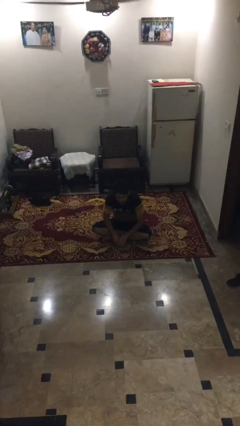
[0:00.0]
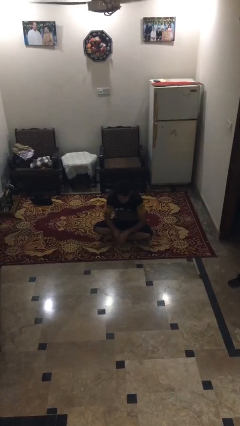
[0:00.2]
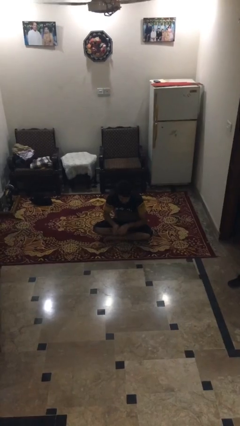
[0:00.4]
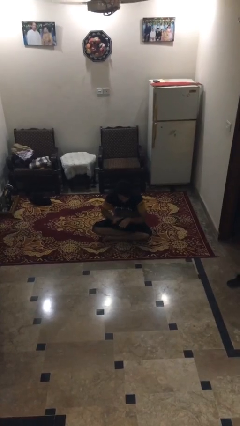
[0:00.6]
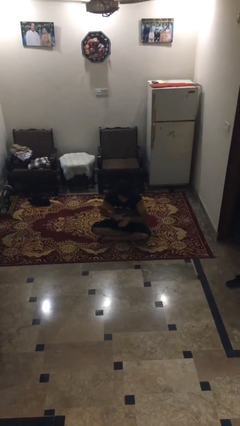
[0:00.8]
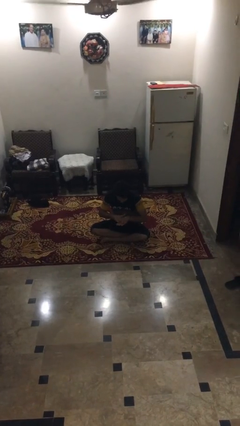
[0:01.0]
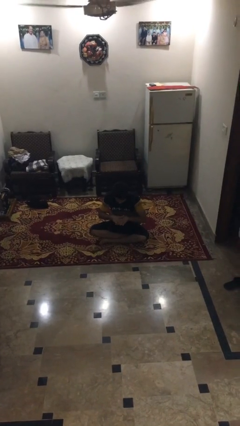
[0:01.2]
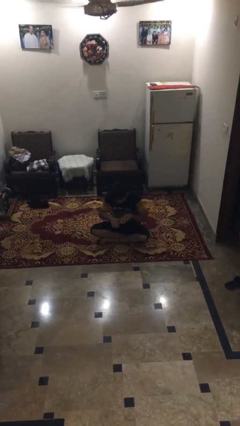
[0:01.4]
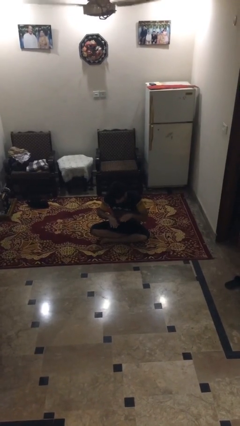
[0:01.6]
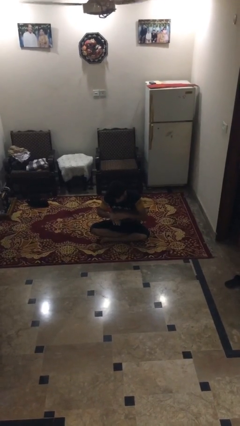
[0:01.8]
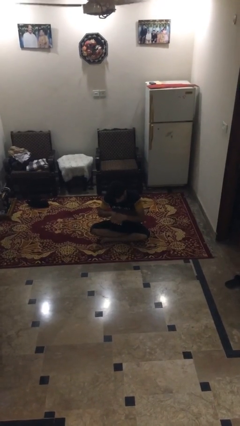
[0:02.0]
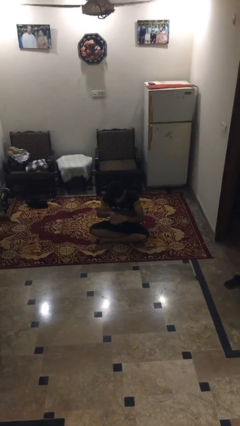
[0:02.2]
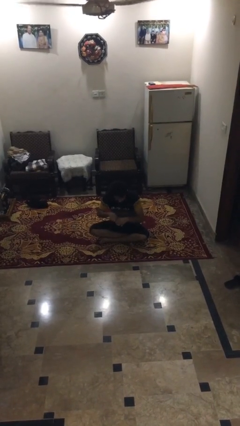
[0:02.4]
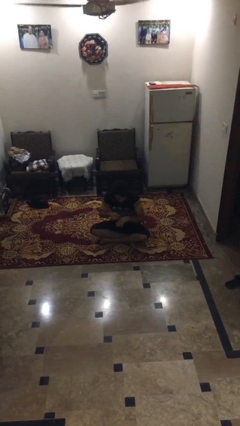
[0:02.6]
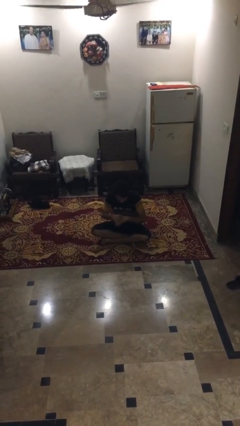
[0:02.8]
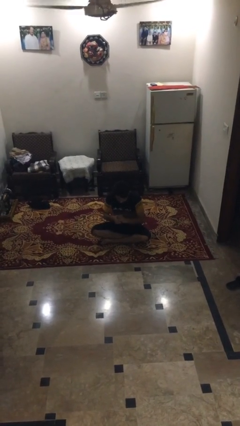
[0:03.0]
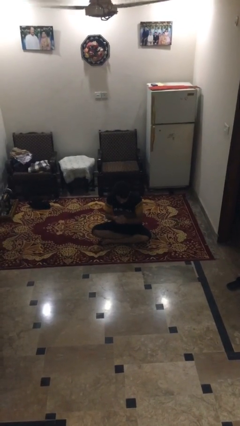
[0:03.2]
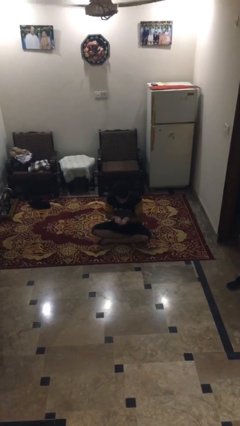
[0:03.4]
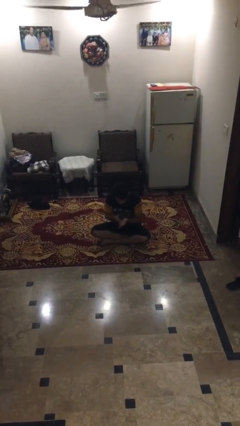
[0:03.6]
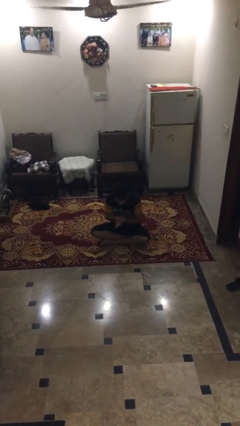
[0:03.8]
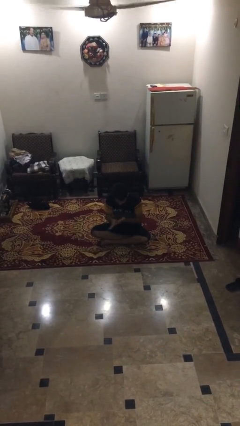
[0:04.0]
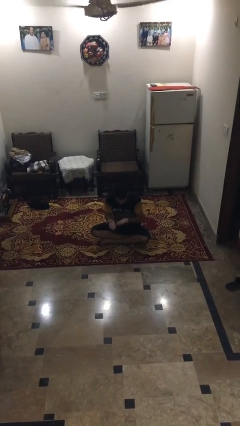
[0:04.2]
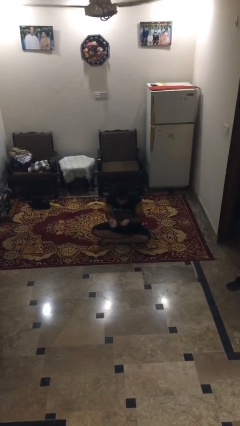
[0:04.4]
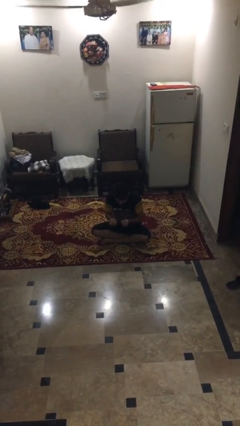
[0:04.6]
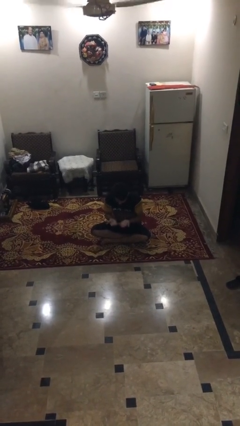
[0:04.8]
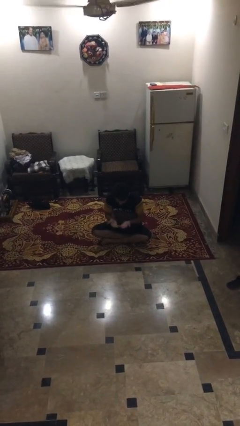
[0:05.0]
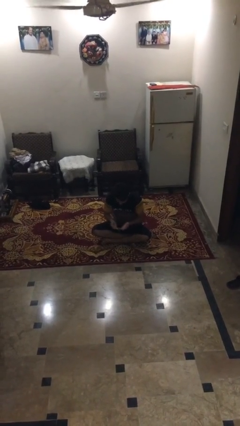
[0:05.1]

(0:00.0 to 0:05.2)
person looks at hands in lap

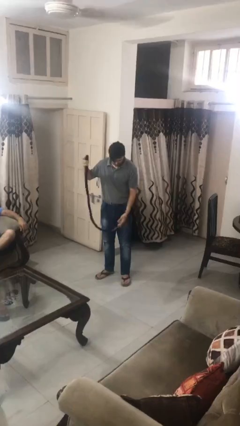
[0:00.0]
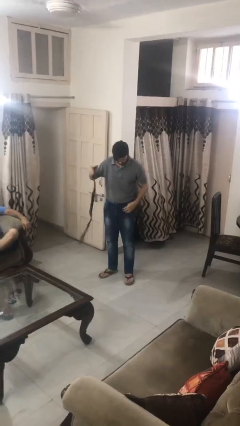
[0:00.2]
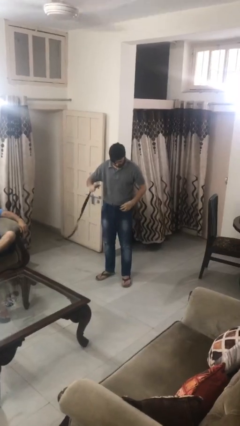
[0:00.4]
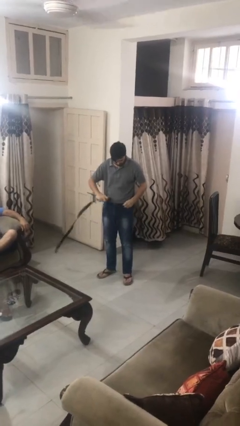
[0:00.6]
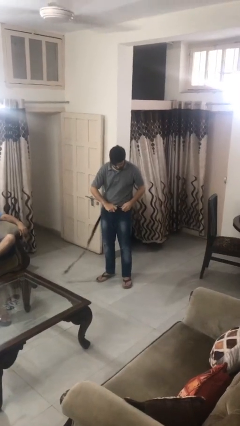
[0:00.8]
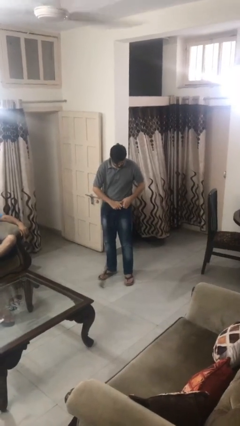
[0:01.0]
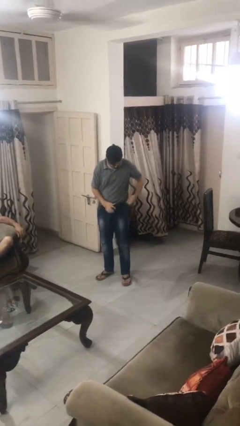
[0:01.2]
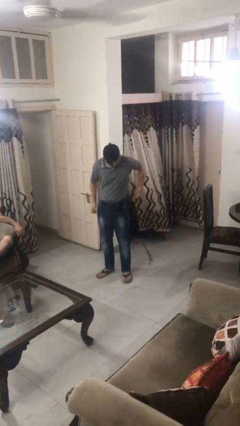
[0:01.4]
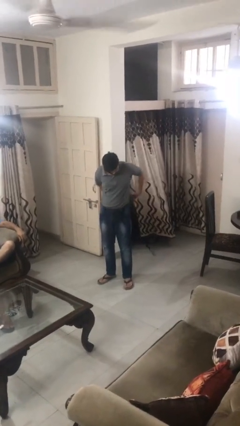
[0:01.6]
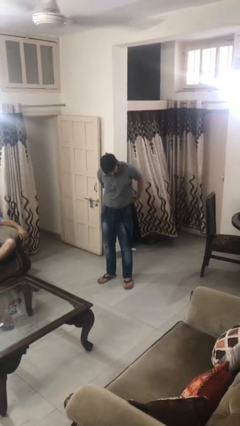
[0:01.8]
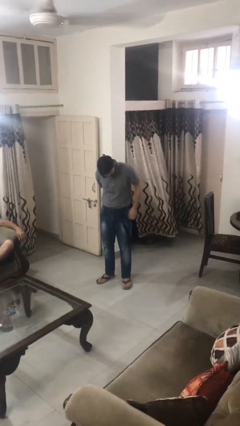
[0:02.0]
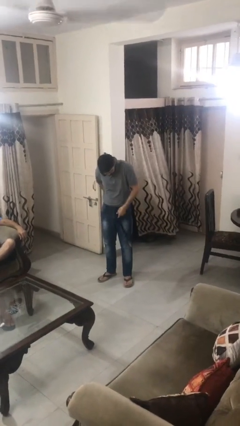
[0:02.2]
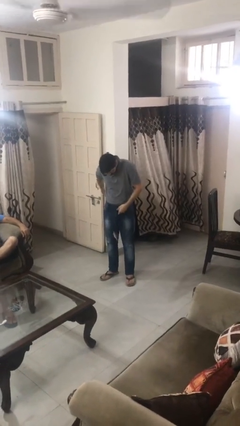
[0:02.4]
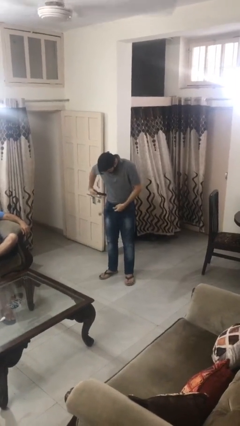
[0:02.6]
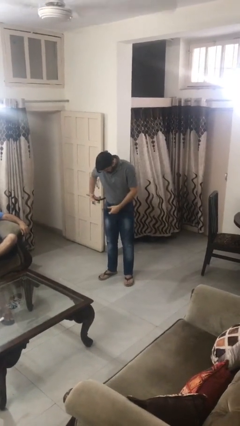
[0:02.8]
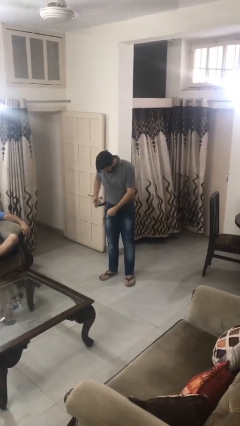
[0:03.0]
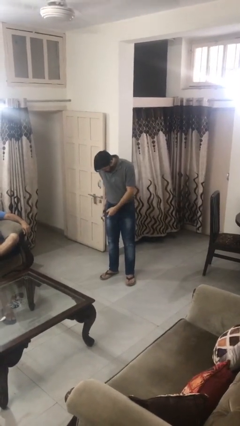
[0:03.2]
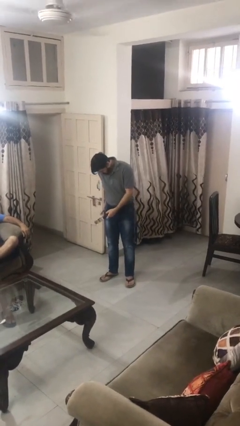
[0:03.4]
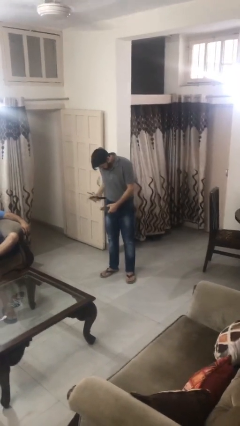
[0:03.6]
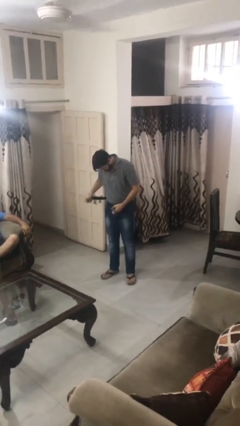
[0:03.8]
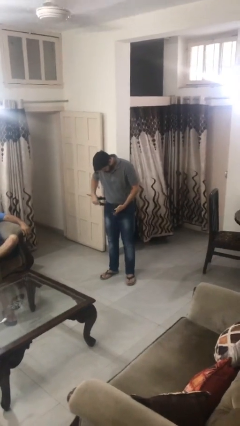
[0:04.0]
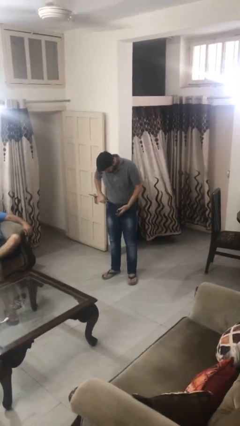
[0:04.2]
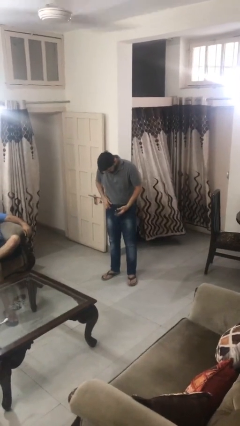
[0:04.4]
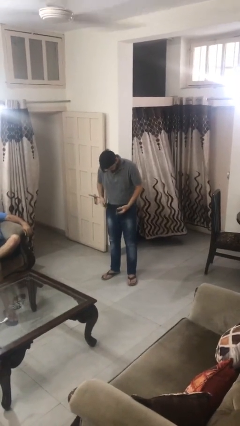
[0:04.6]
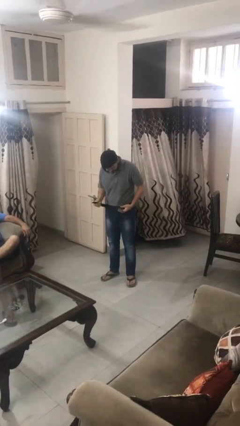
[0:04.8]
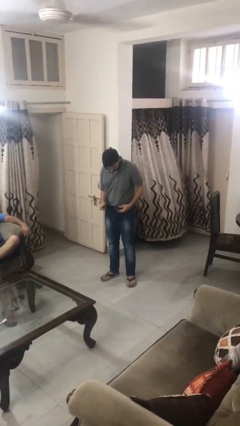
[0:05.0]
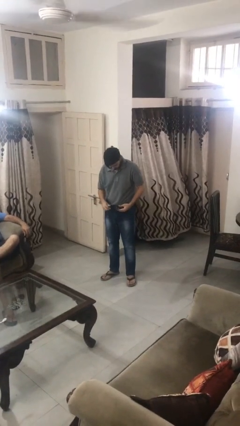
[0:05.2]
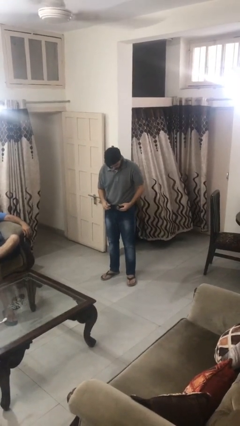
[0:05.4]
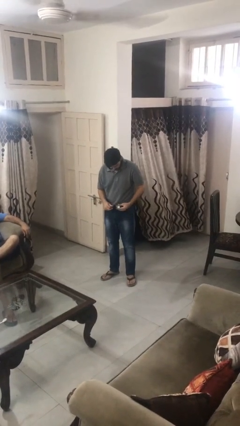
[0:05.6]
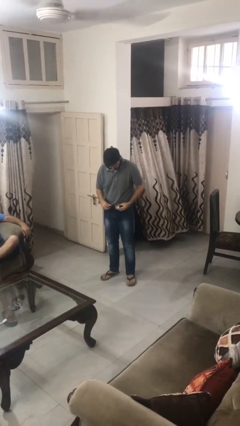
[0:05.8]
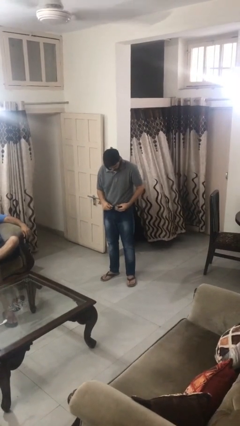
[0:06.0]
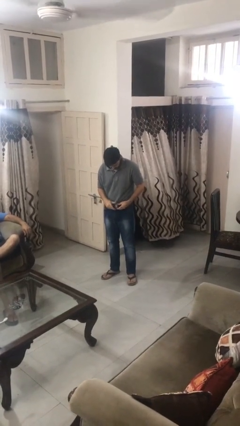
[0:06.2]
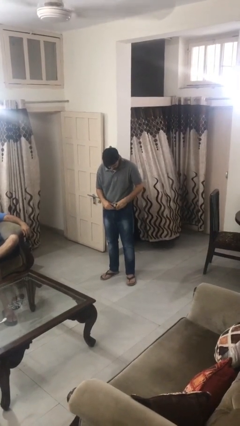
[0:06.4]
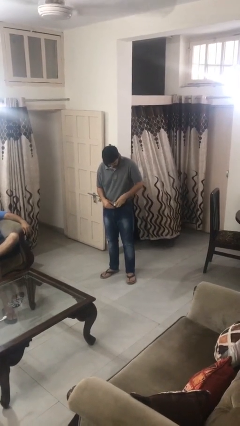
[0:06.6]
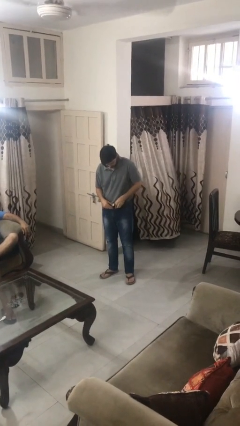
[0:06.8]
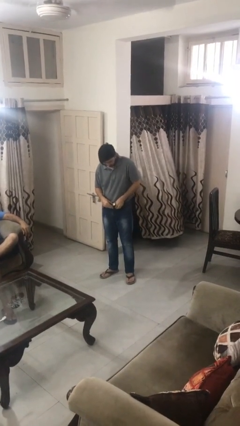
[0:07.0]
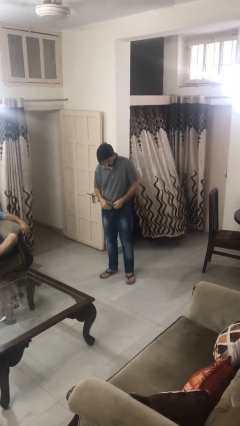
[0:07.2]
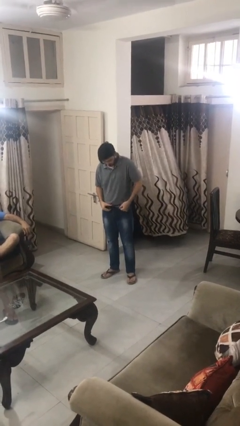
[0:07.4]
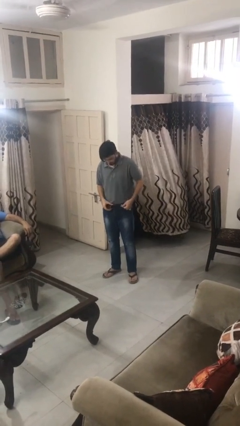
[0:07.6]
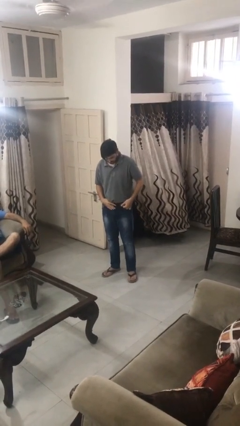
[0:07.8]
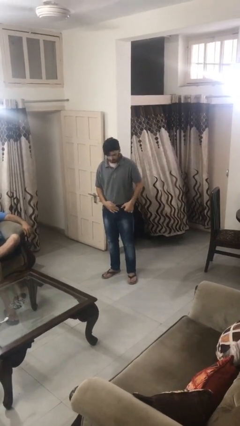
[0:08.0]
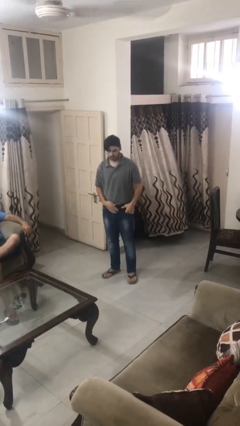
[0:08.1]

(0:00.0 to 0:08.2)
person puts on belt

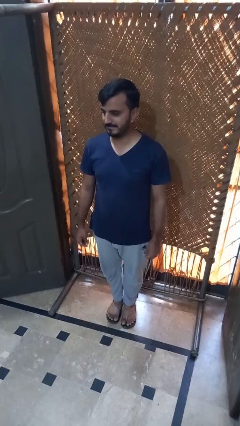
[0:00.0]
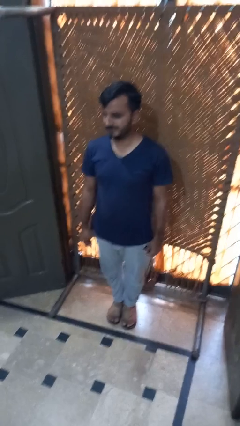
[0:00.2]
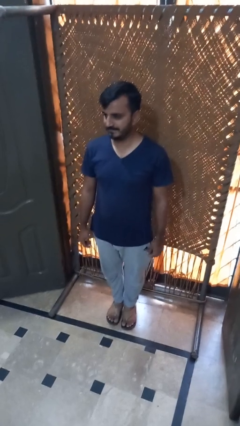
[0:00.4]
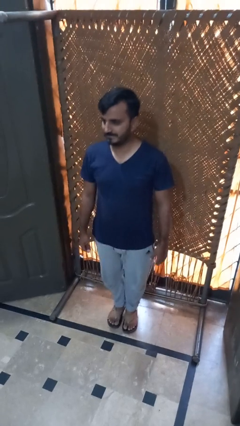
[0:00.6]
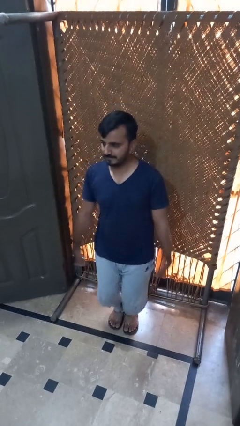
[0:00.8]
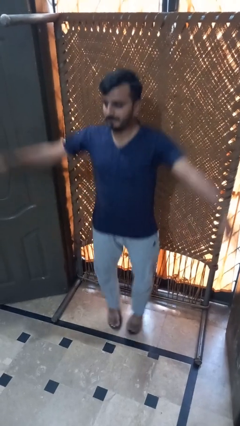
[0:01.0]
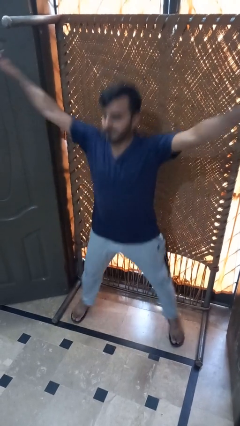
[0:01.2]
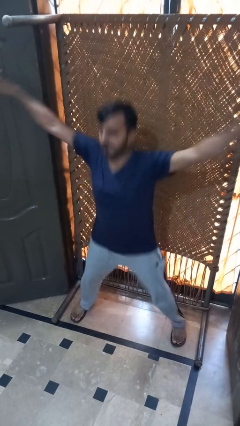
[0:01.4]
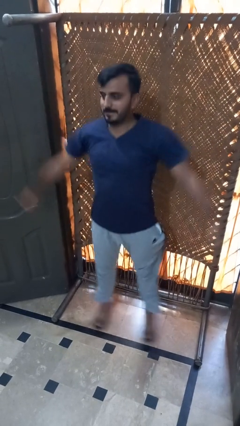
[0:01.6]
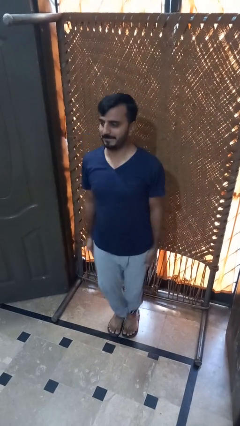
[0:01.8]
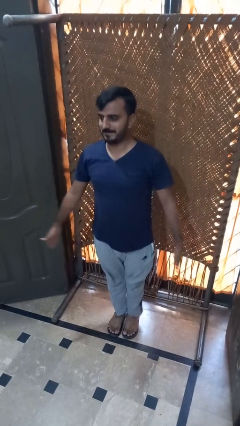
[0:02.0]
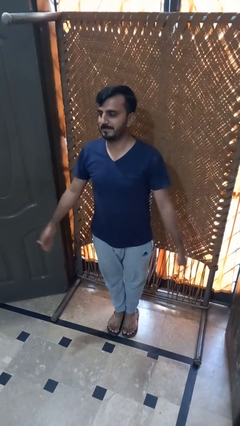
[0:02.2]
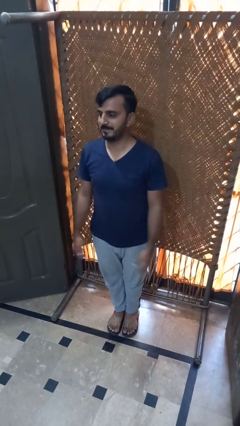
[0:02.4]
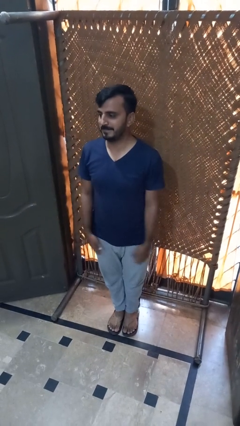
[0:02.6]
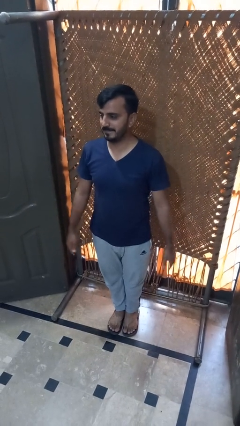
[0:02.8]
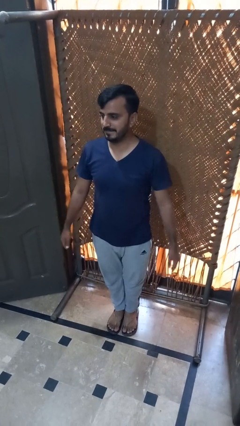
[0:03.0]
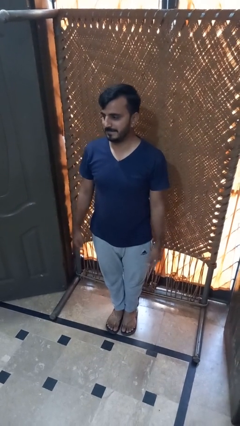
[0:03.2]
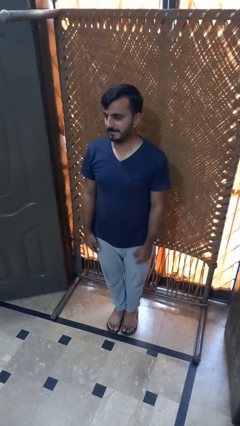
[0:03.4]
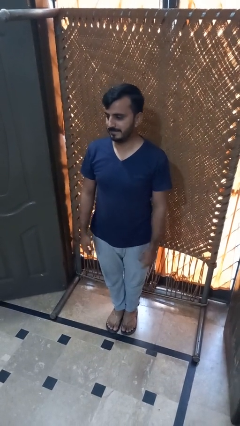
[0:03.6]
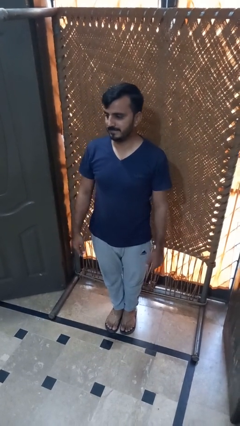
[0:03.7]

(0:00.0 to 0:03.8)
person exercises with jumping jacks

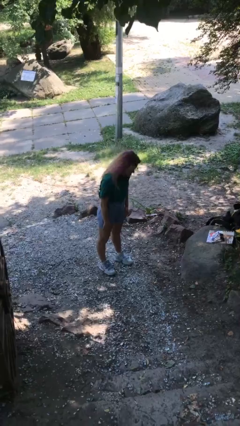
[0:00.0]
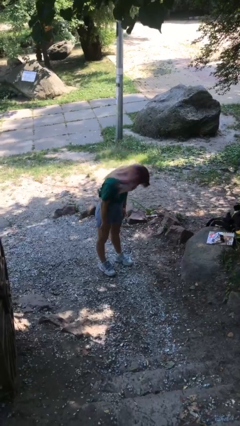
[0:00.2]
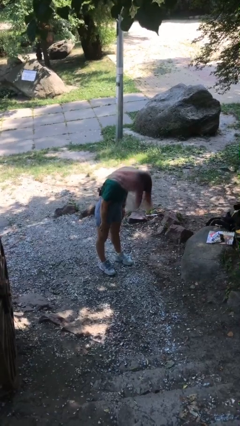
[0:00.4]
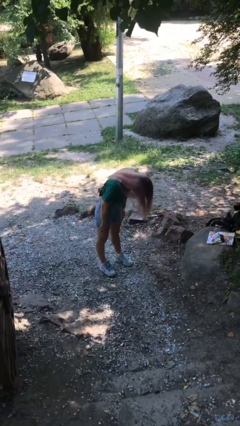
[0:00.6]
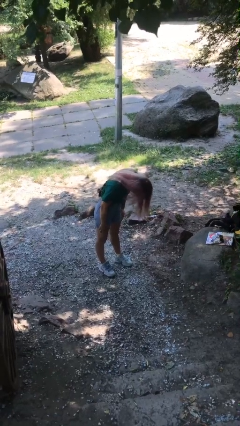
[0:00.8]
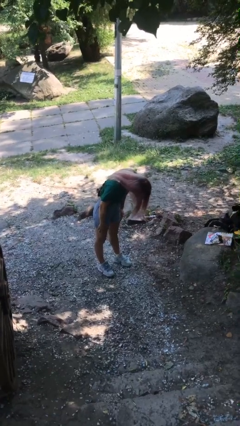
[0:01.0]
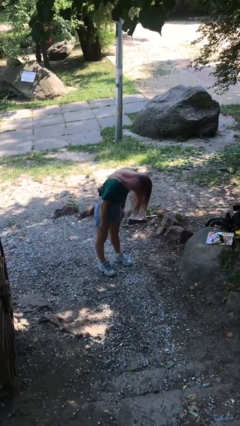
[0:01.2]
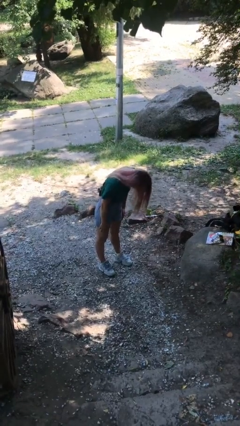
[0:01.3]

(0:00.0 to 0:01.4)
person bows
